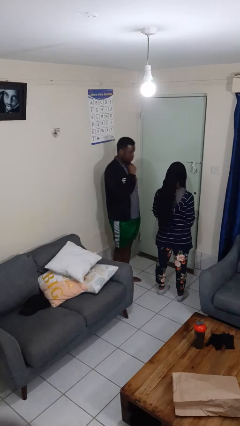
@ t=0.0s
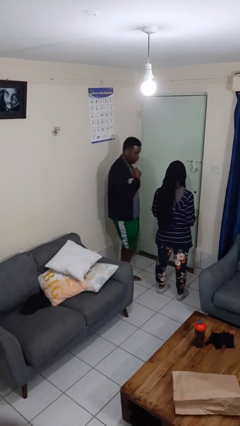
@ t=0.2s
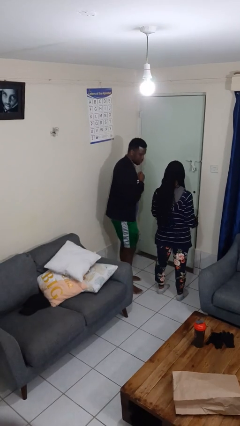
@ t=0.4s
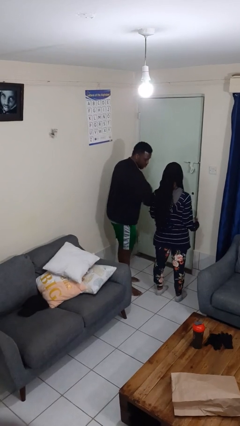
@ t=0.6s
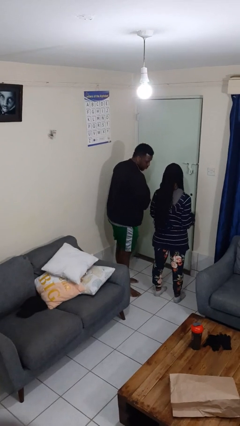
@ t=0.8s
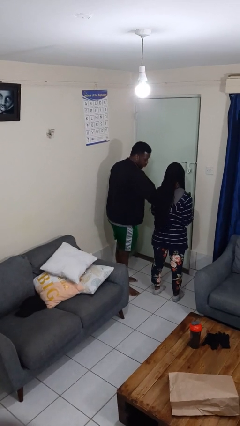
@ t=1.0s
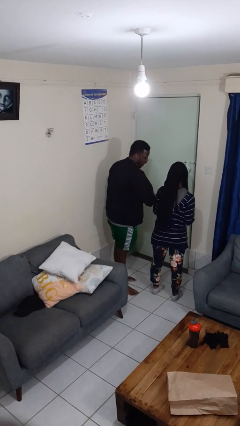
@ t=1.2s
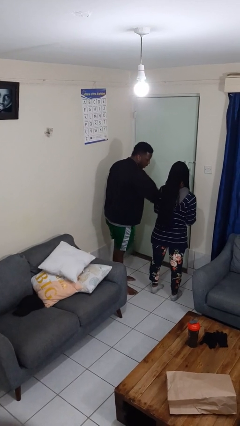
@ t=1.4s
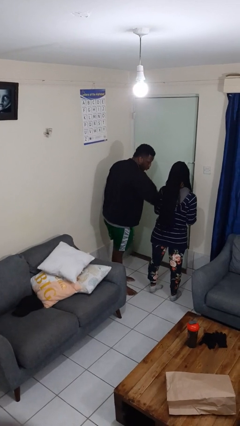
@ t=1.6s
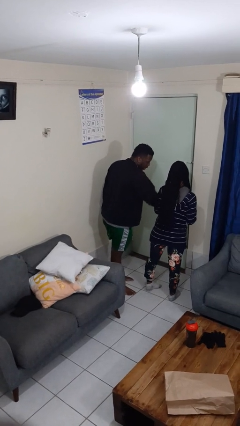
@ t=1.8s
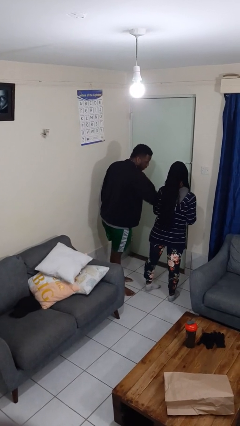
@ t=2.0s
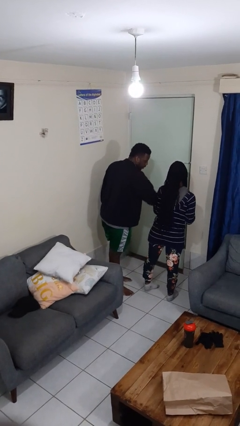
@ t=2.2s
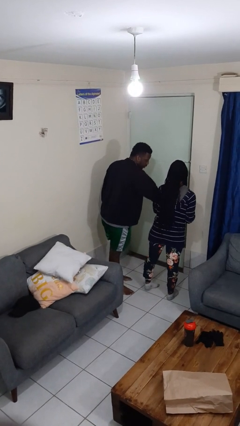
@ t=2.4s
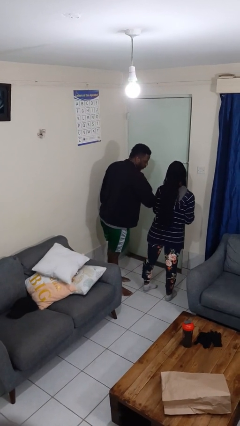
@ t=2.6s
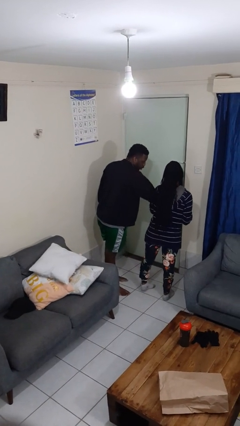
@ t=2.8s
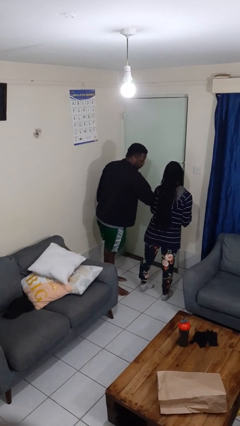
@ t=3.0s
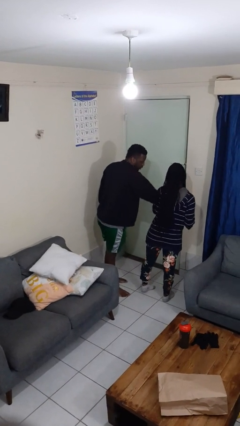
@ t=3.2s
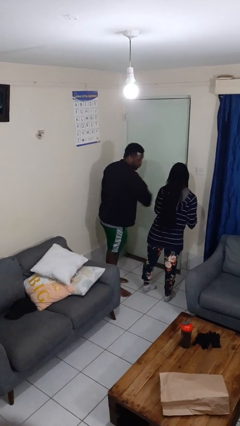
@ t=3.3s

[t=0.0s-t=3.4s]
person nudges person with elbow

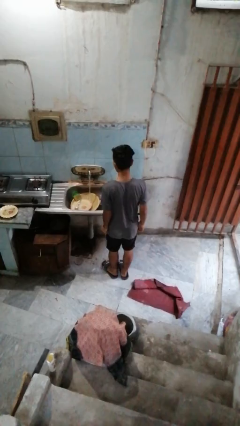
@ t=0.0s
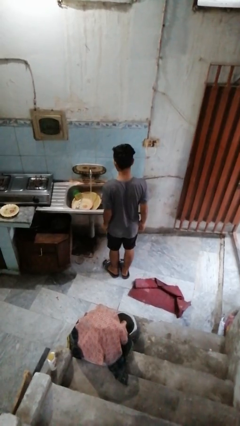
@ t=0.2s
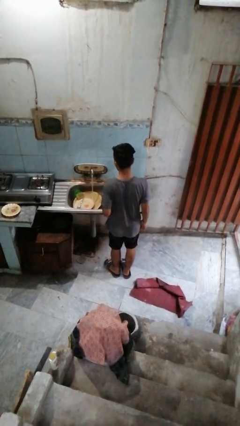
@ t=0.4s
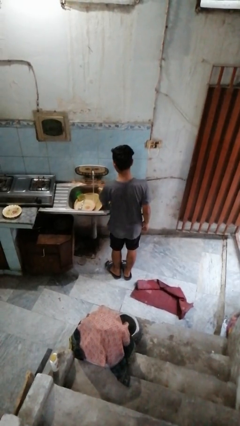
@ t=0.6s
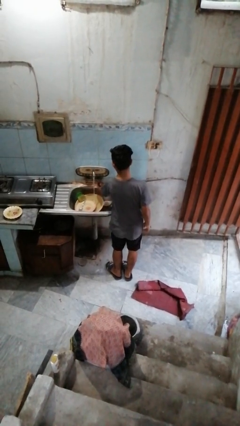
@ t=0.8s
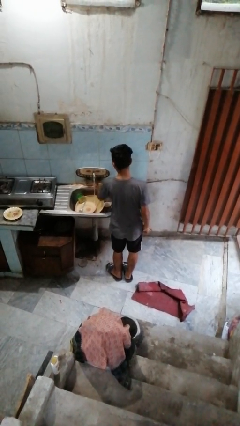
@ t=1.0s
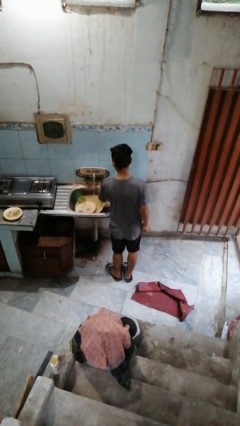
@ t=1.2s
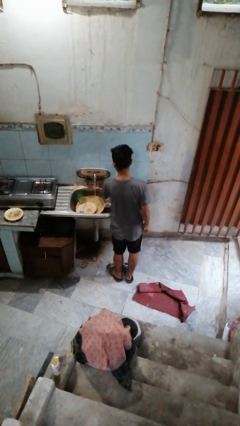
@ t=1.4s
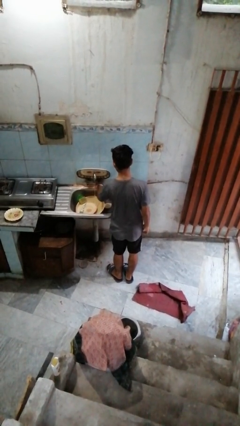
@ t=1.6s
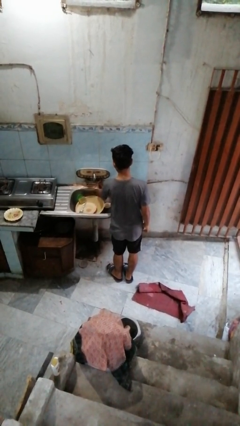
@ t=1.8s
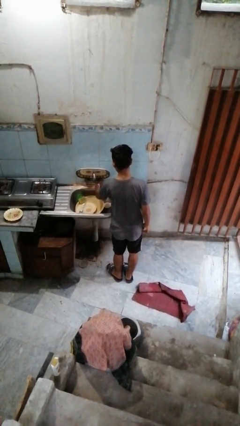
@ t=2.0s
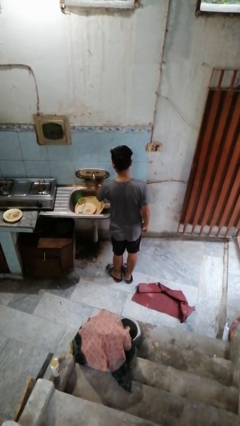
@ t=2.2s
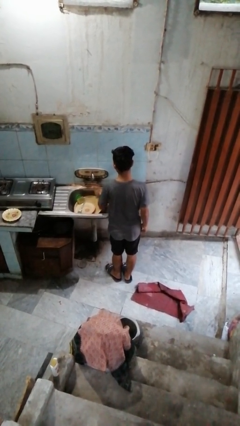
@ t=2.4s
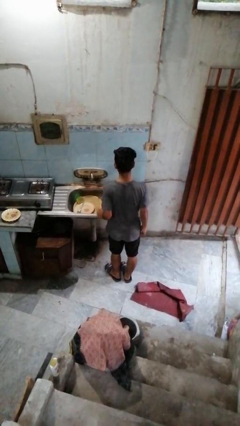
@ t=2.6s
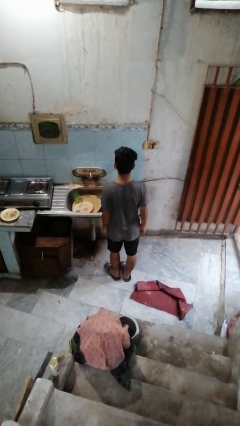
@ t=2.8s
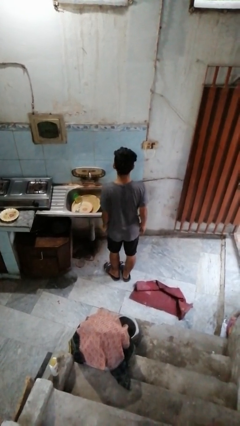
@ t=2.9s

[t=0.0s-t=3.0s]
person turns off faucet

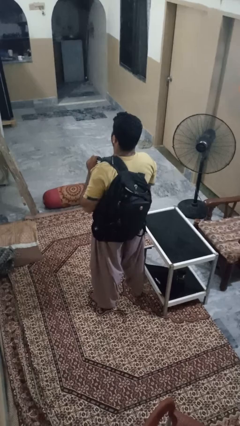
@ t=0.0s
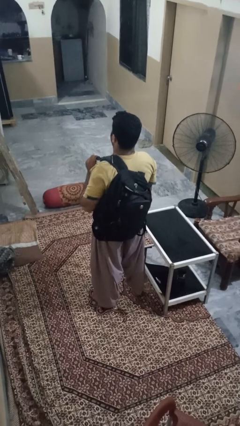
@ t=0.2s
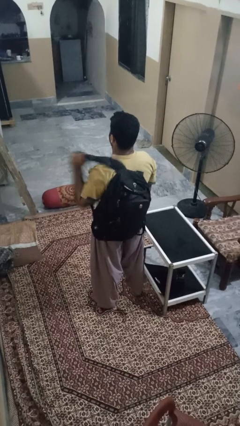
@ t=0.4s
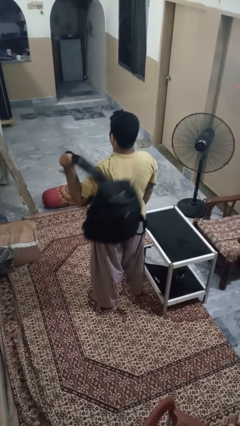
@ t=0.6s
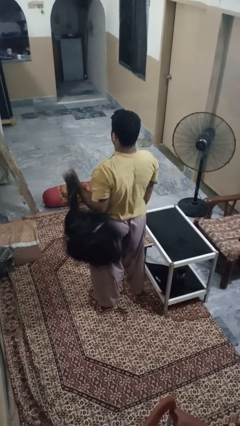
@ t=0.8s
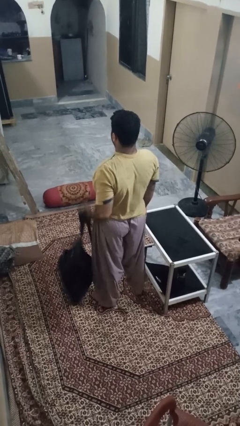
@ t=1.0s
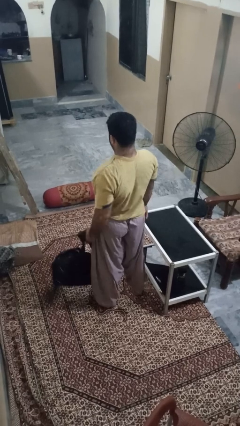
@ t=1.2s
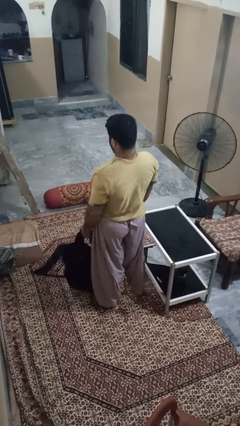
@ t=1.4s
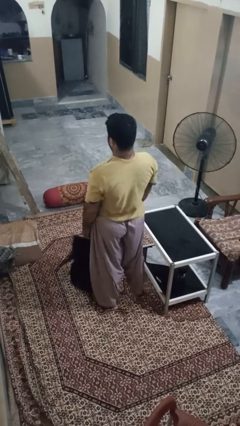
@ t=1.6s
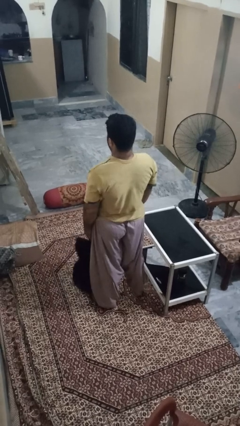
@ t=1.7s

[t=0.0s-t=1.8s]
person takes off backpack

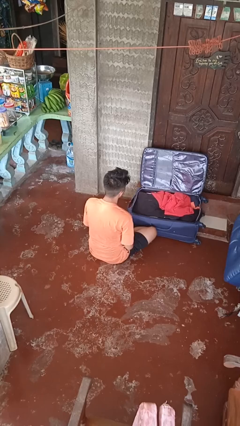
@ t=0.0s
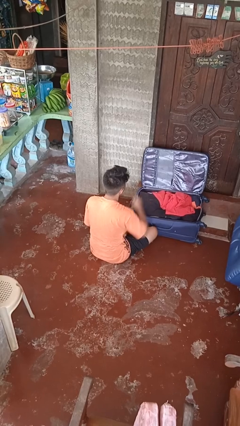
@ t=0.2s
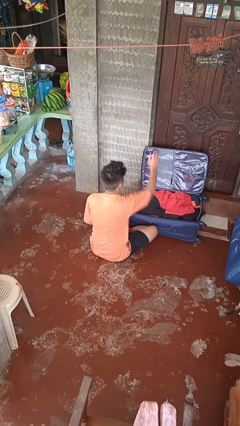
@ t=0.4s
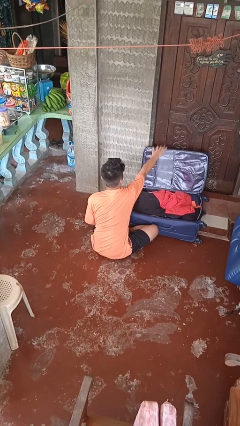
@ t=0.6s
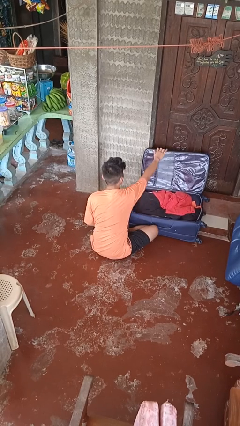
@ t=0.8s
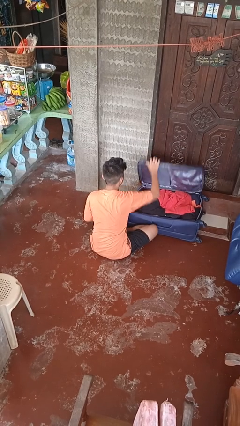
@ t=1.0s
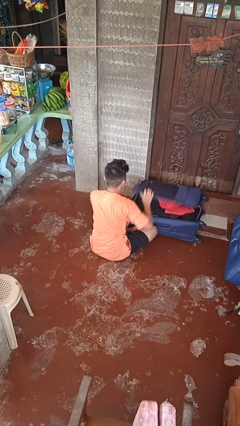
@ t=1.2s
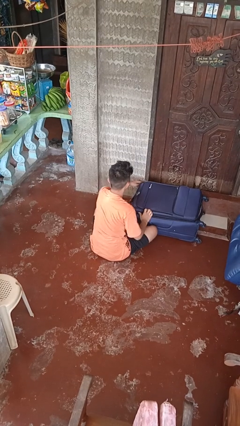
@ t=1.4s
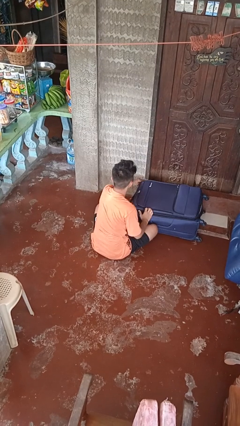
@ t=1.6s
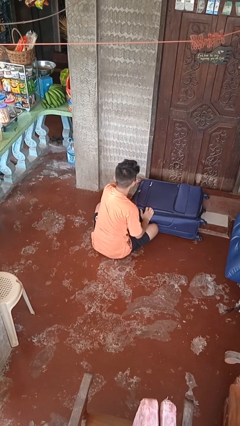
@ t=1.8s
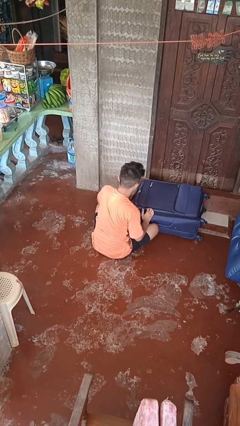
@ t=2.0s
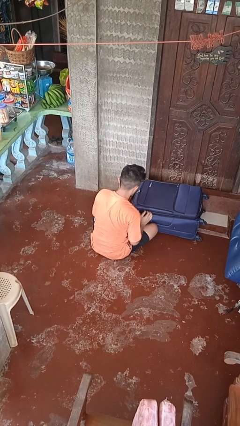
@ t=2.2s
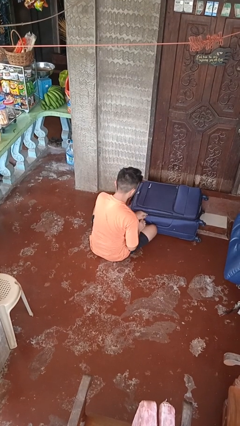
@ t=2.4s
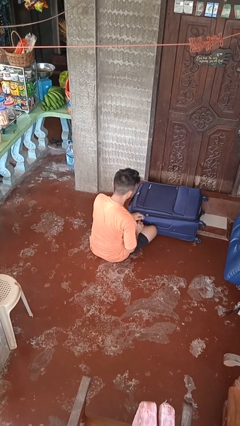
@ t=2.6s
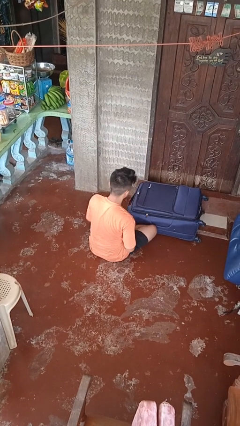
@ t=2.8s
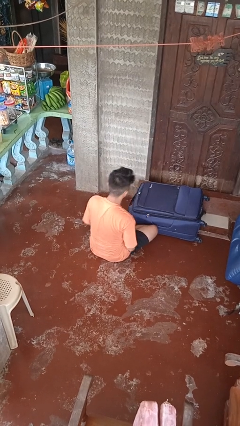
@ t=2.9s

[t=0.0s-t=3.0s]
person closes suitcase

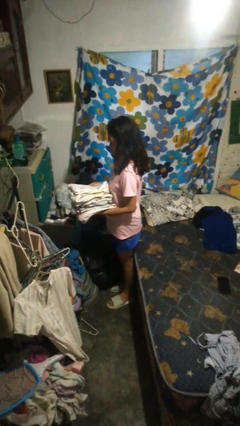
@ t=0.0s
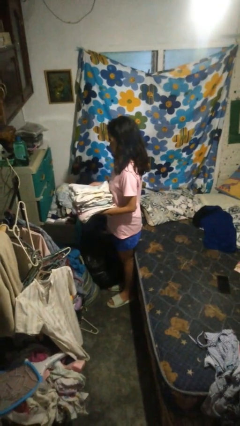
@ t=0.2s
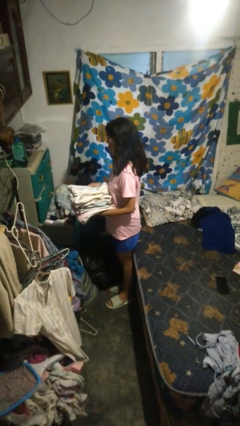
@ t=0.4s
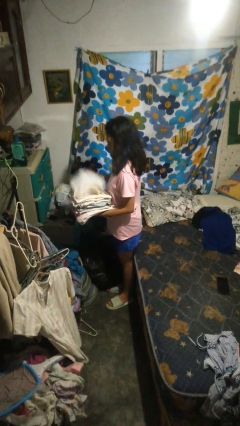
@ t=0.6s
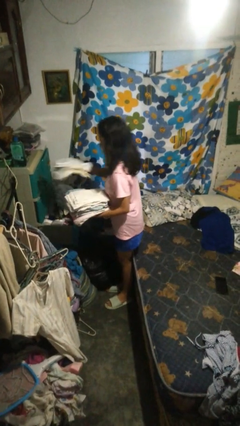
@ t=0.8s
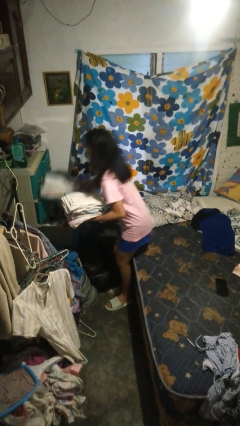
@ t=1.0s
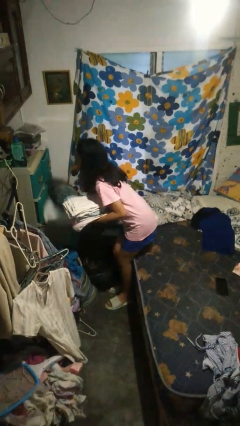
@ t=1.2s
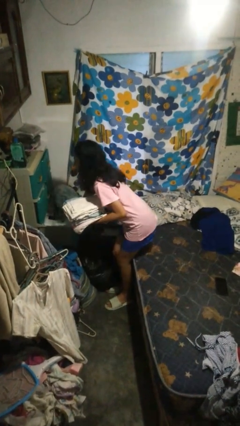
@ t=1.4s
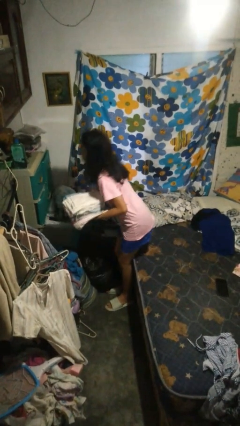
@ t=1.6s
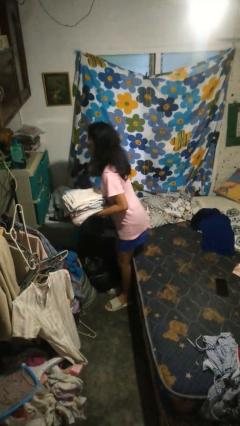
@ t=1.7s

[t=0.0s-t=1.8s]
person puts clothes into dresser

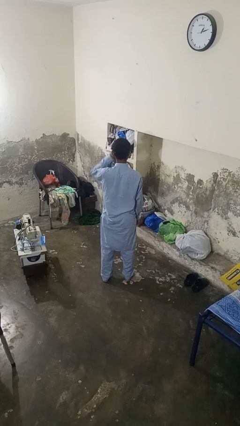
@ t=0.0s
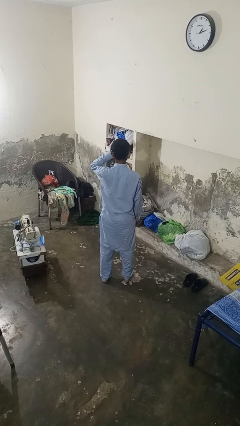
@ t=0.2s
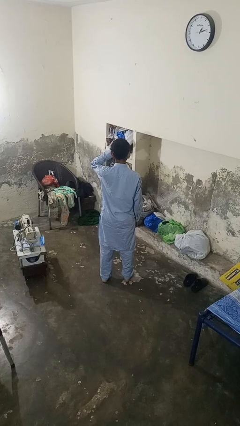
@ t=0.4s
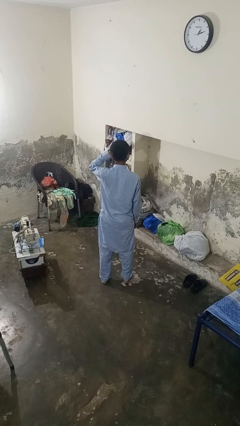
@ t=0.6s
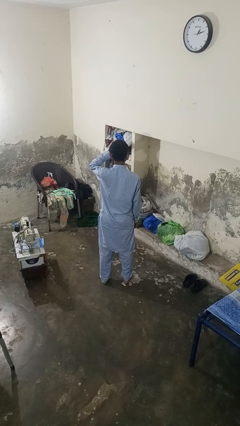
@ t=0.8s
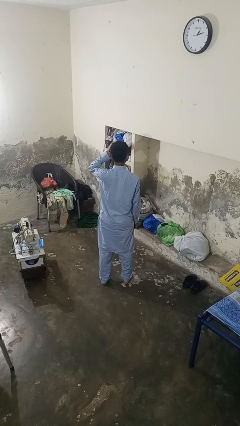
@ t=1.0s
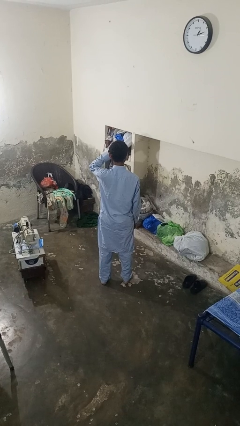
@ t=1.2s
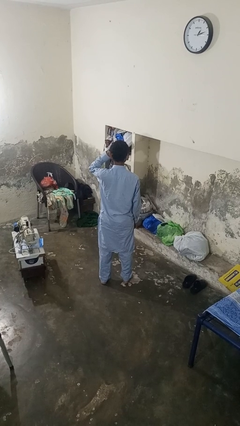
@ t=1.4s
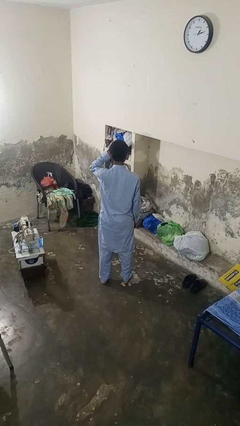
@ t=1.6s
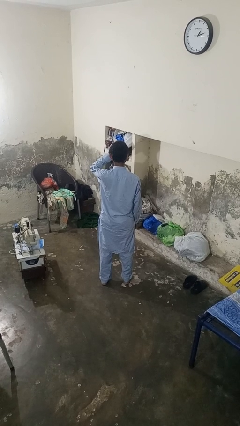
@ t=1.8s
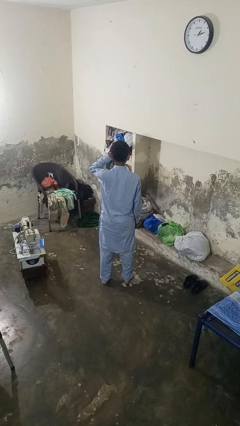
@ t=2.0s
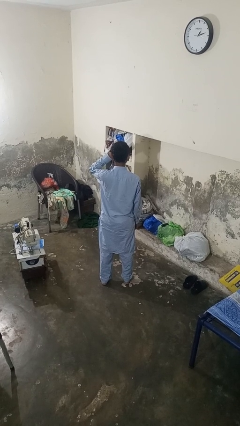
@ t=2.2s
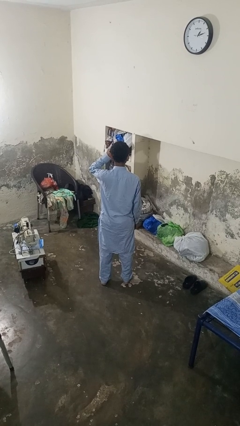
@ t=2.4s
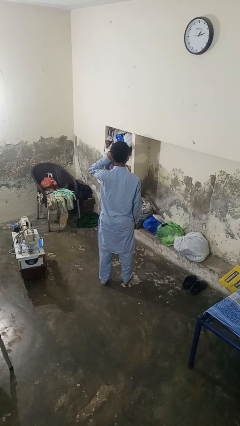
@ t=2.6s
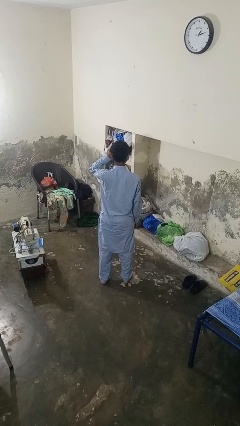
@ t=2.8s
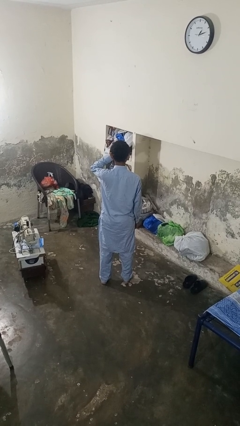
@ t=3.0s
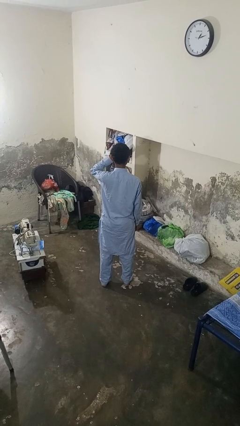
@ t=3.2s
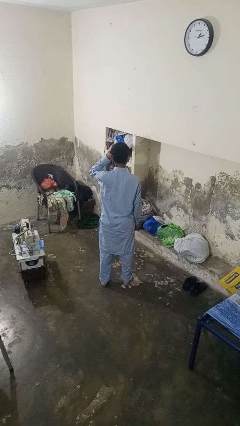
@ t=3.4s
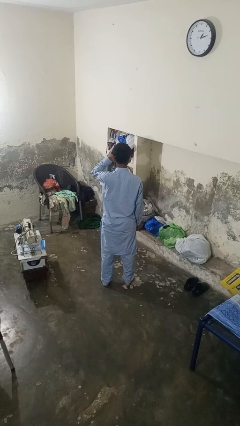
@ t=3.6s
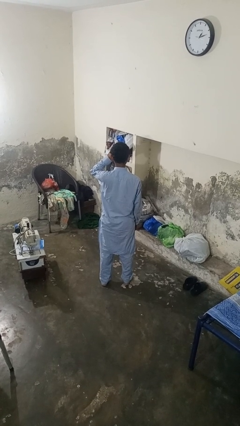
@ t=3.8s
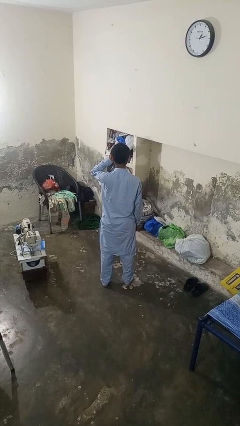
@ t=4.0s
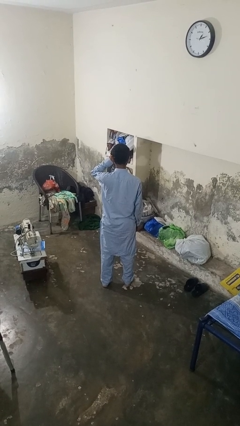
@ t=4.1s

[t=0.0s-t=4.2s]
person rubs eyes
